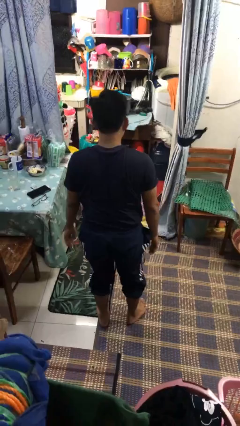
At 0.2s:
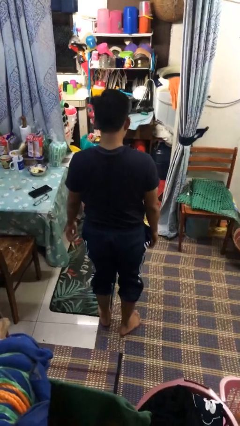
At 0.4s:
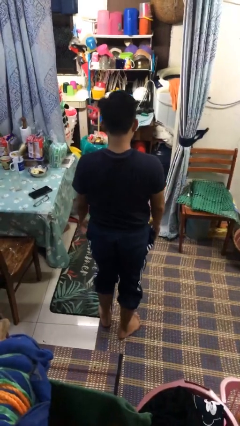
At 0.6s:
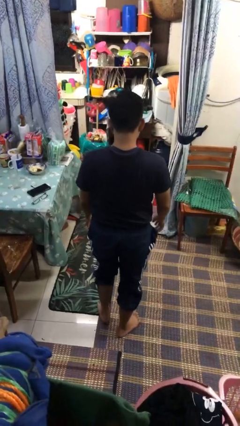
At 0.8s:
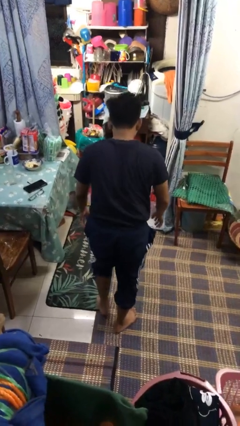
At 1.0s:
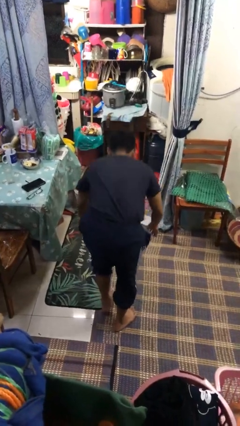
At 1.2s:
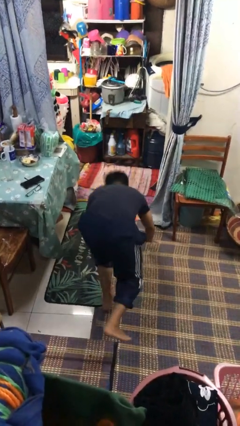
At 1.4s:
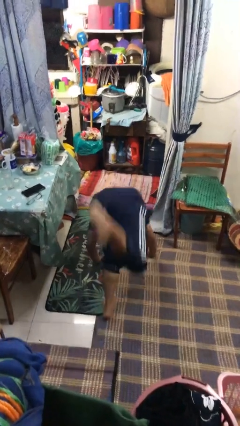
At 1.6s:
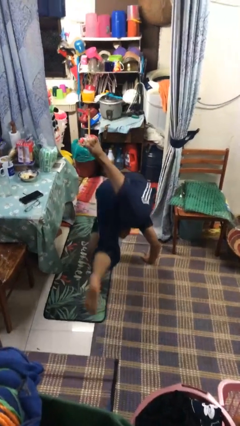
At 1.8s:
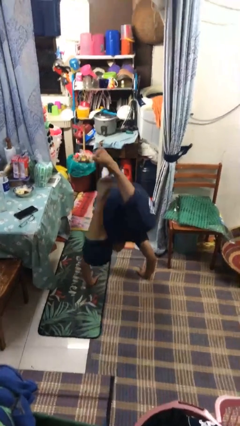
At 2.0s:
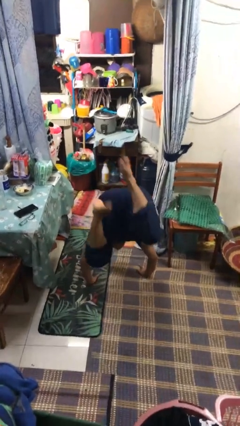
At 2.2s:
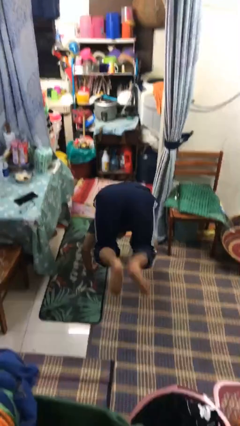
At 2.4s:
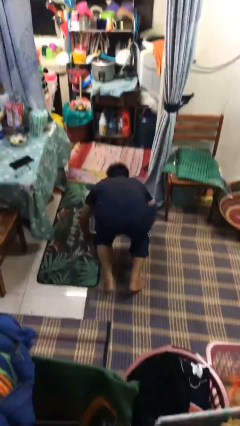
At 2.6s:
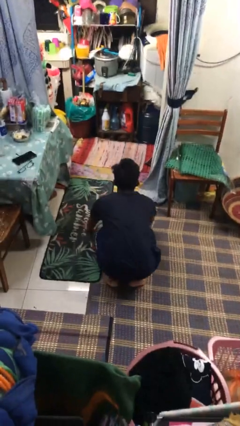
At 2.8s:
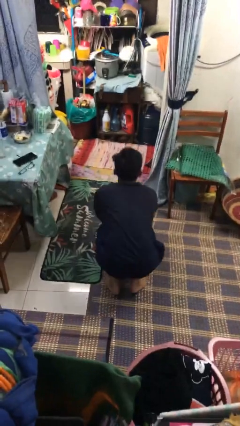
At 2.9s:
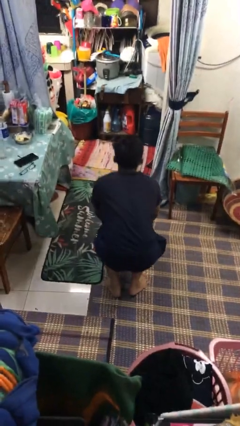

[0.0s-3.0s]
person handstand

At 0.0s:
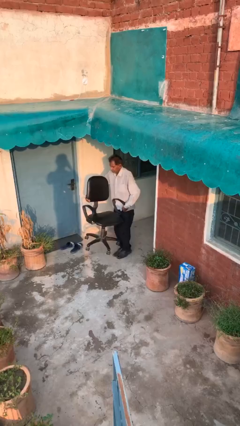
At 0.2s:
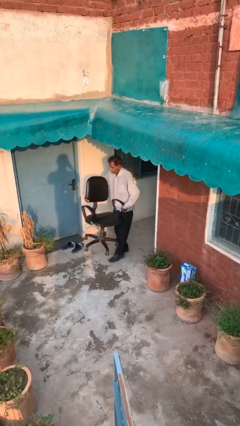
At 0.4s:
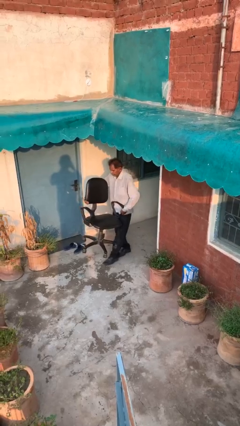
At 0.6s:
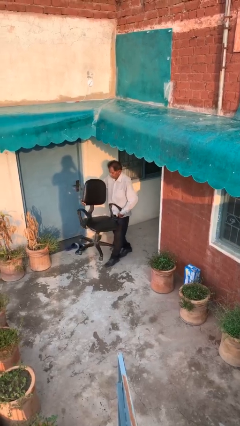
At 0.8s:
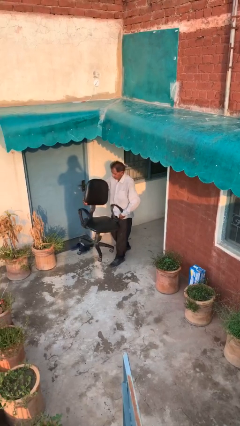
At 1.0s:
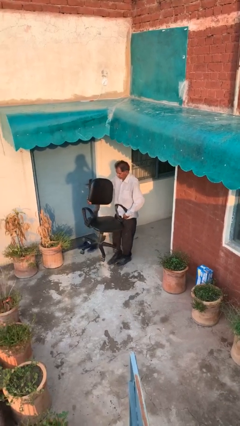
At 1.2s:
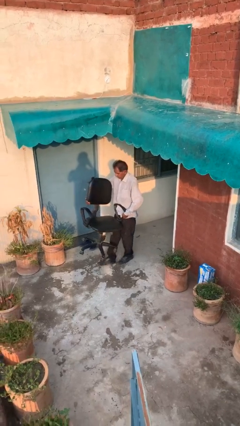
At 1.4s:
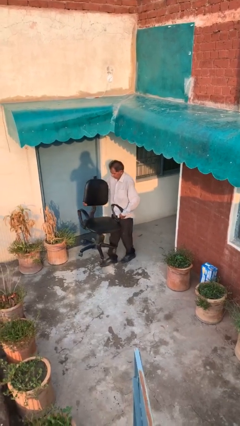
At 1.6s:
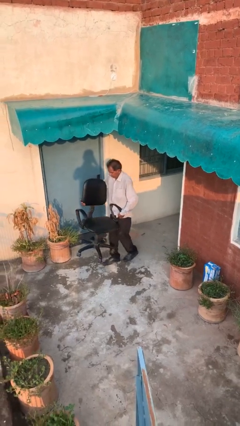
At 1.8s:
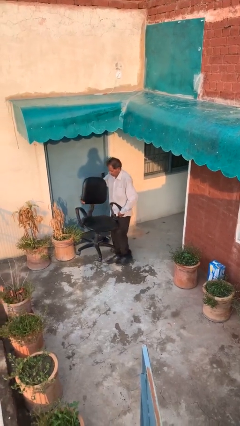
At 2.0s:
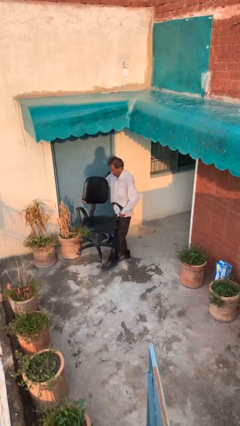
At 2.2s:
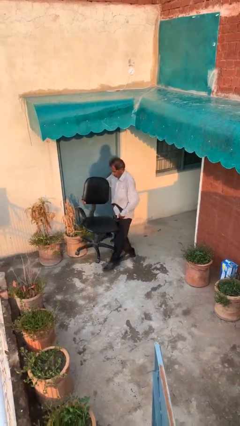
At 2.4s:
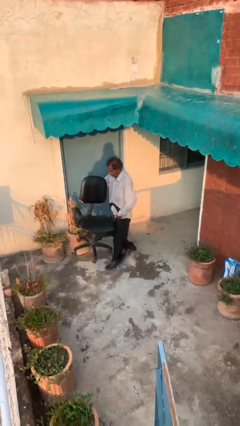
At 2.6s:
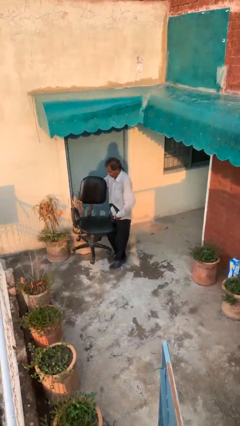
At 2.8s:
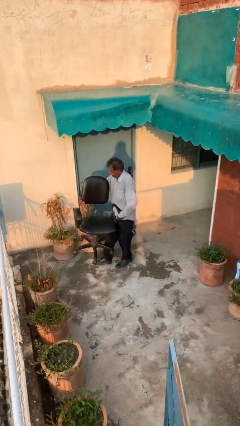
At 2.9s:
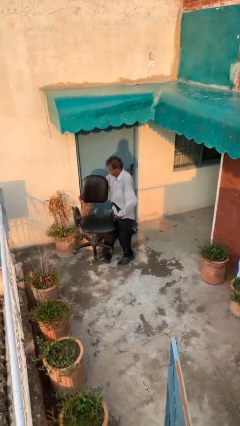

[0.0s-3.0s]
person carries heavy object

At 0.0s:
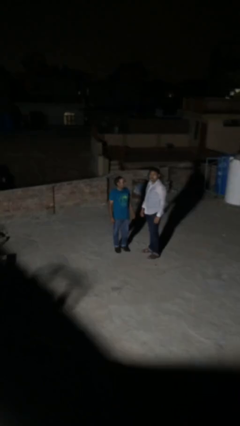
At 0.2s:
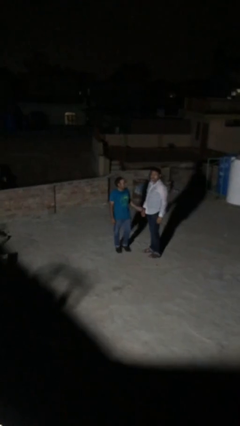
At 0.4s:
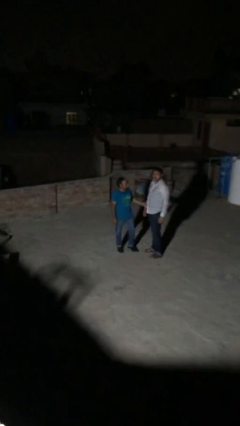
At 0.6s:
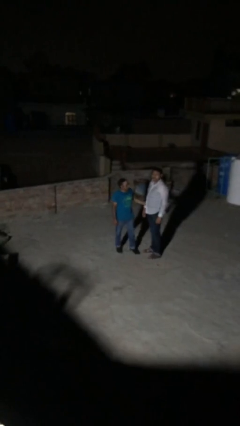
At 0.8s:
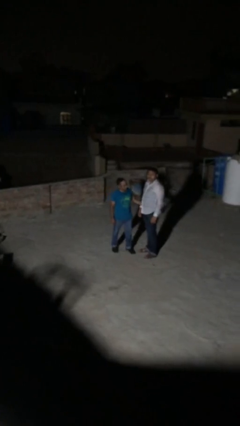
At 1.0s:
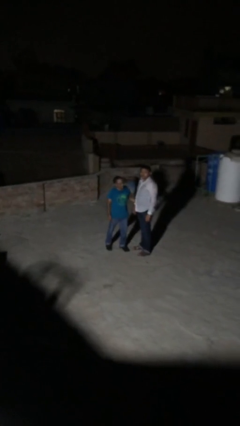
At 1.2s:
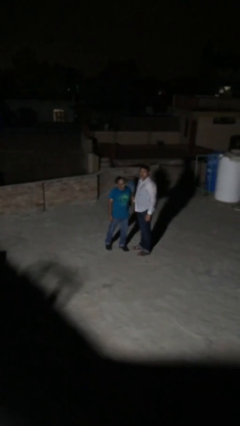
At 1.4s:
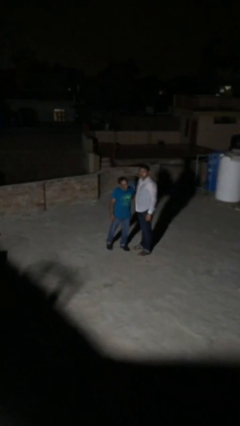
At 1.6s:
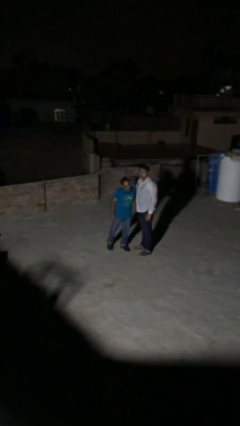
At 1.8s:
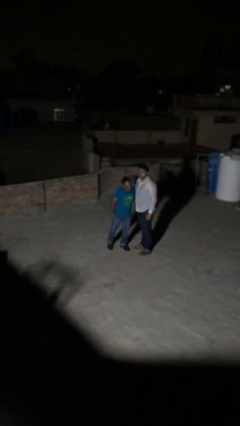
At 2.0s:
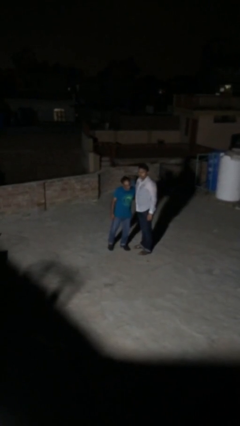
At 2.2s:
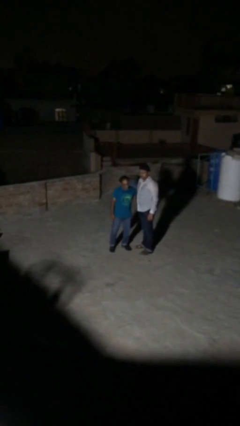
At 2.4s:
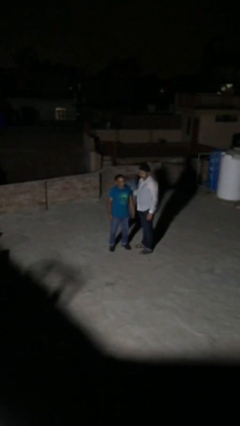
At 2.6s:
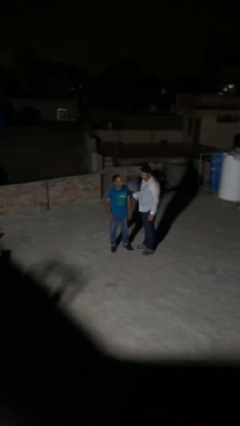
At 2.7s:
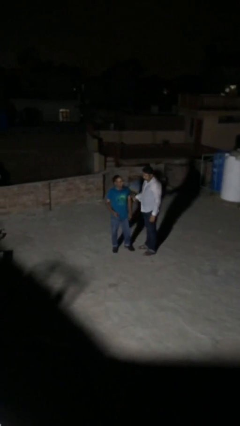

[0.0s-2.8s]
person embraces person

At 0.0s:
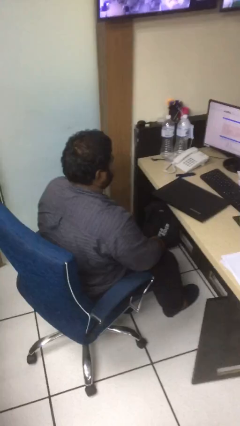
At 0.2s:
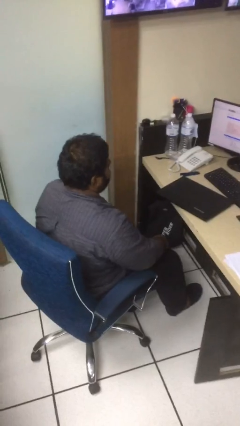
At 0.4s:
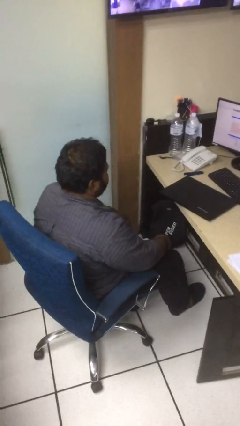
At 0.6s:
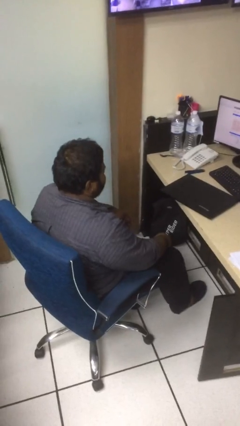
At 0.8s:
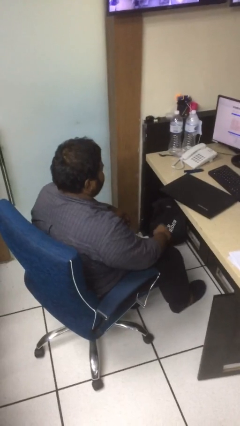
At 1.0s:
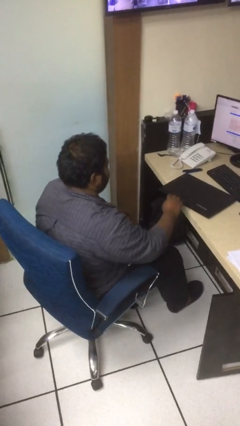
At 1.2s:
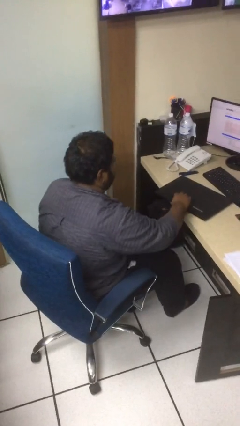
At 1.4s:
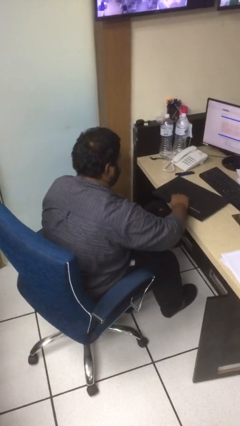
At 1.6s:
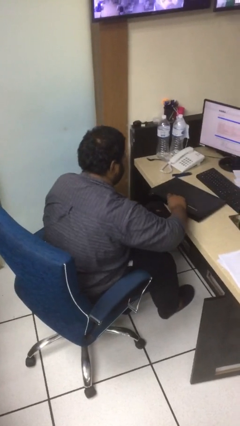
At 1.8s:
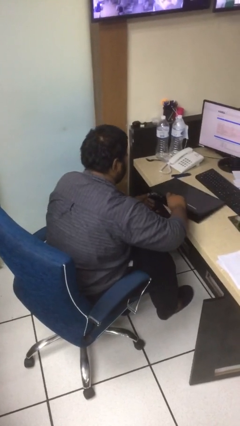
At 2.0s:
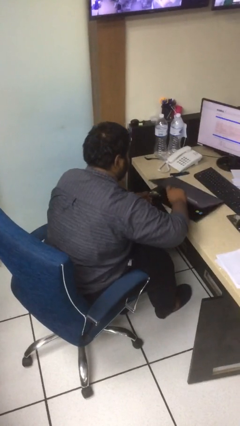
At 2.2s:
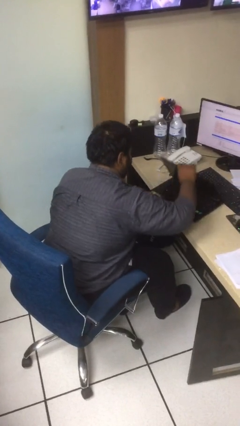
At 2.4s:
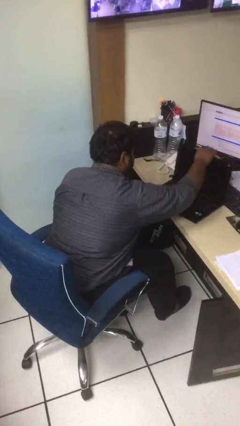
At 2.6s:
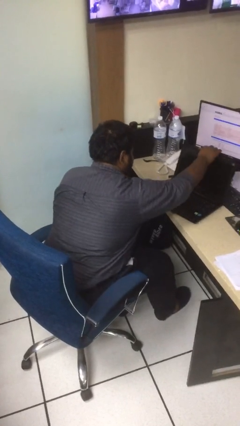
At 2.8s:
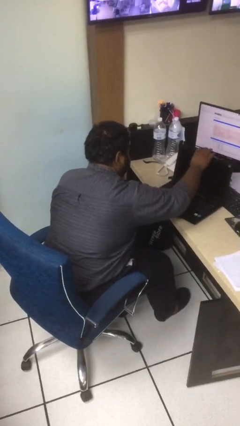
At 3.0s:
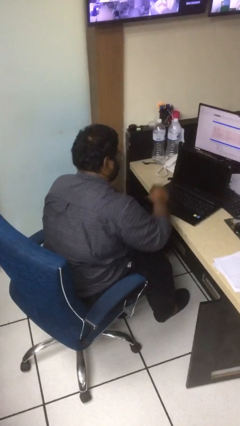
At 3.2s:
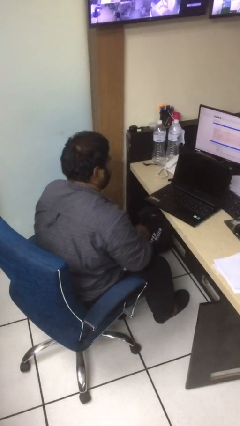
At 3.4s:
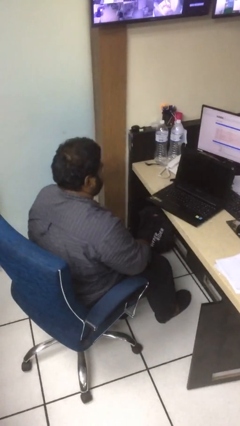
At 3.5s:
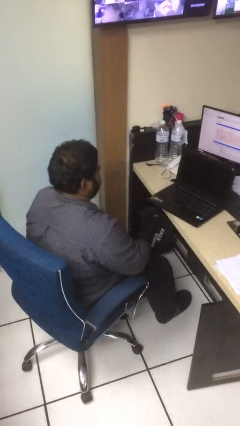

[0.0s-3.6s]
person opens laptop

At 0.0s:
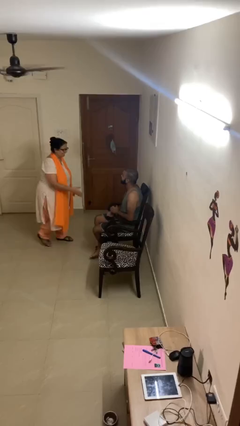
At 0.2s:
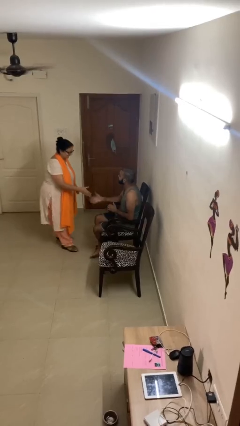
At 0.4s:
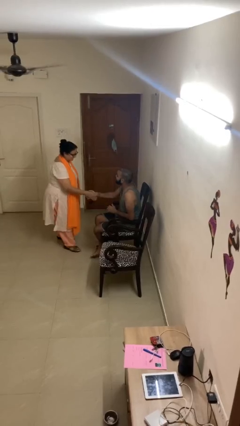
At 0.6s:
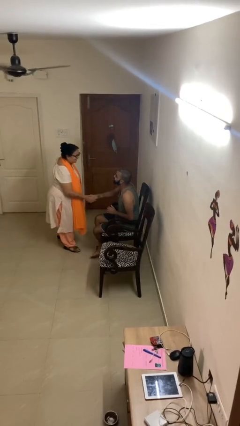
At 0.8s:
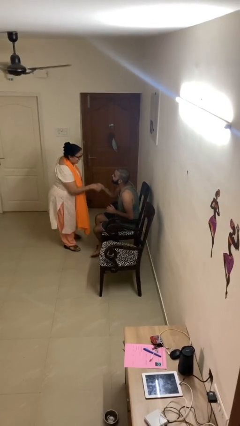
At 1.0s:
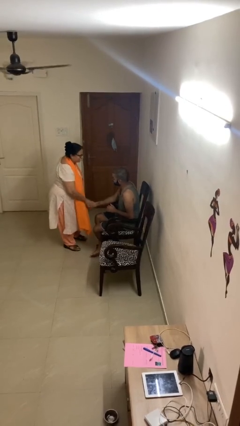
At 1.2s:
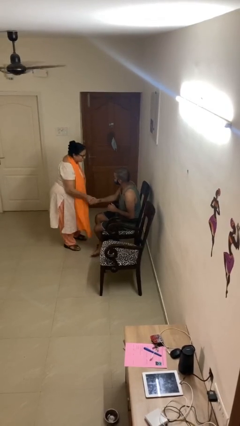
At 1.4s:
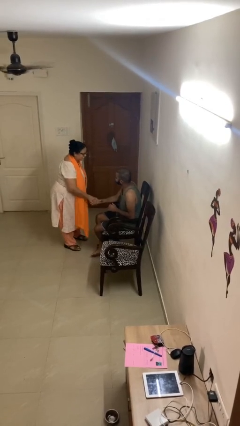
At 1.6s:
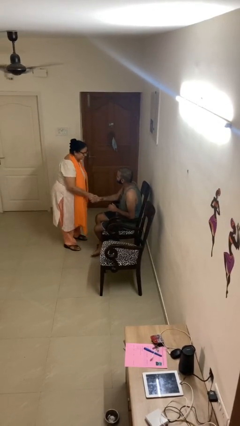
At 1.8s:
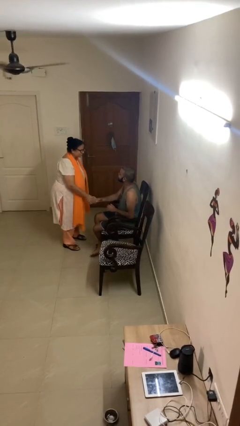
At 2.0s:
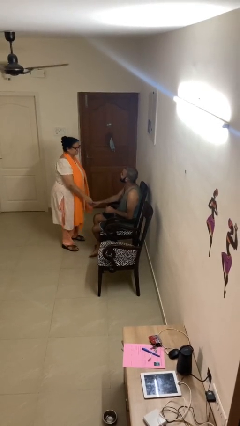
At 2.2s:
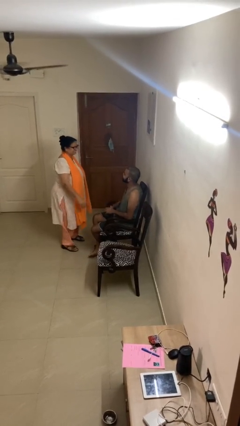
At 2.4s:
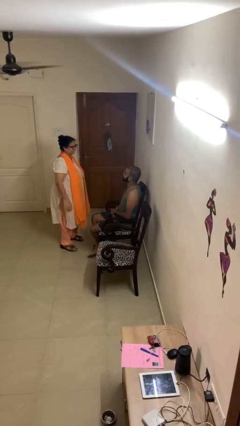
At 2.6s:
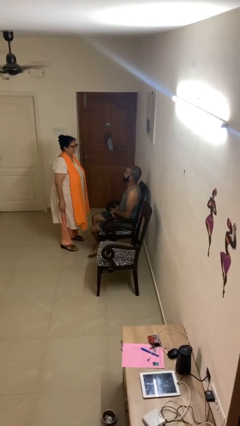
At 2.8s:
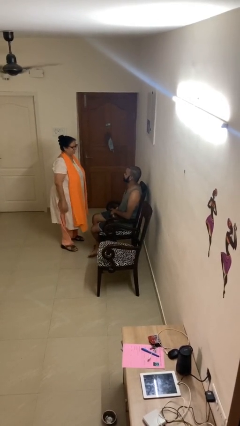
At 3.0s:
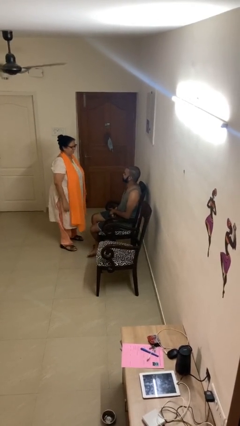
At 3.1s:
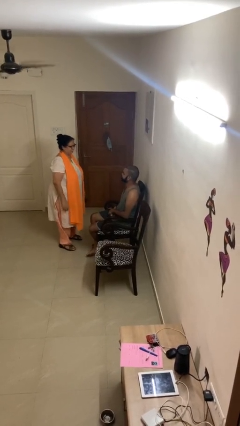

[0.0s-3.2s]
person shakes hand

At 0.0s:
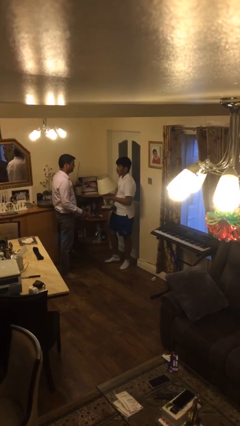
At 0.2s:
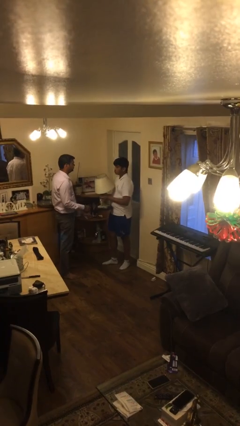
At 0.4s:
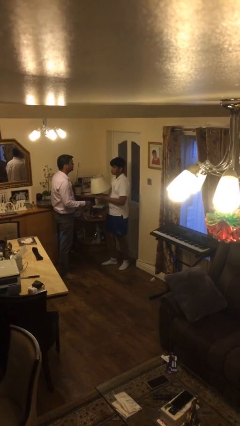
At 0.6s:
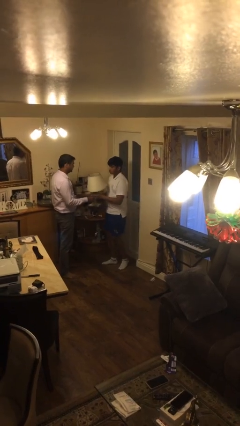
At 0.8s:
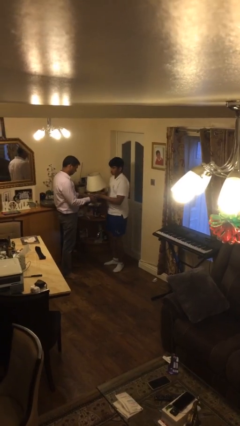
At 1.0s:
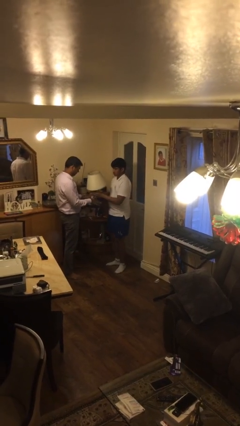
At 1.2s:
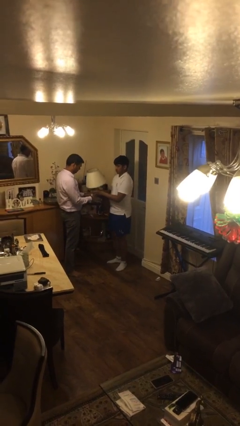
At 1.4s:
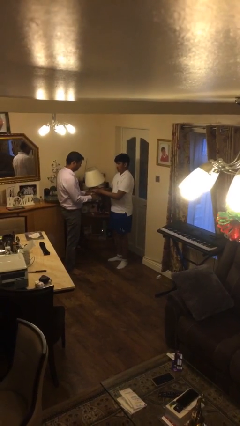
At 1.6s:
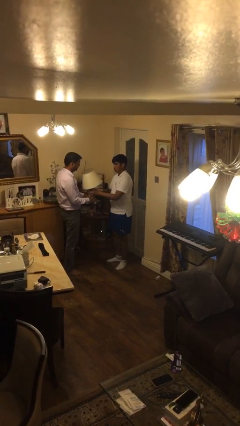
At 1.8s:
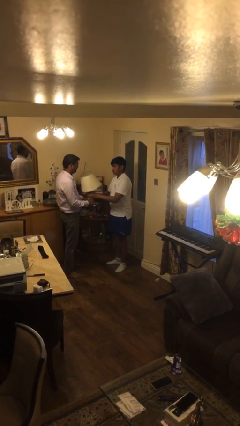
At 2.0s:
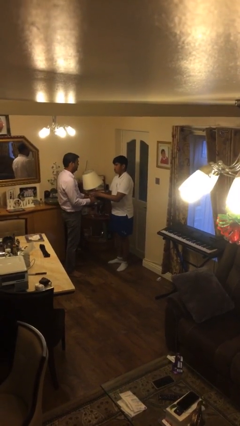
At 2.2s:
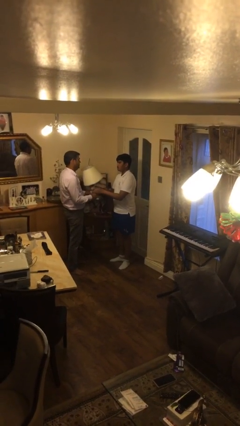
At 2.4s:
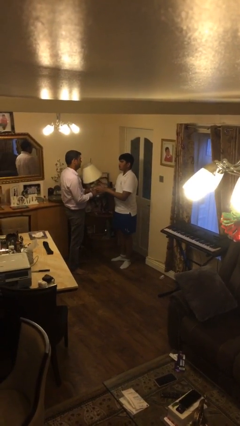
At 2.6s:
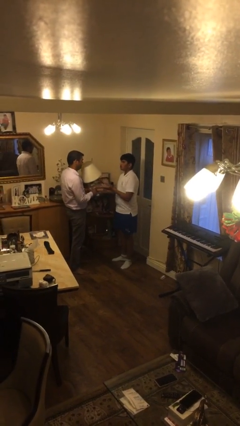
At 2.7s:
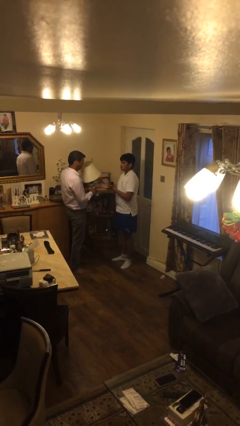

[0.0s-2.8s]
person transfers object to person
